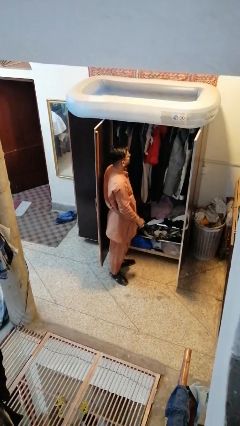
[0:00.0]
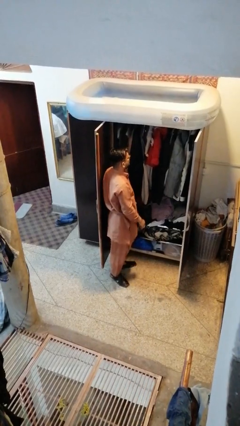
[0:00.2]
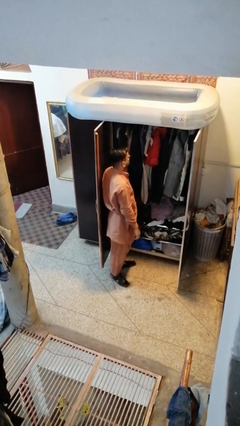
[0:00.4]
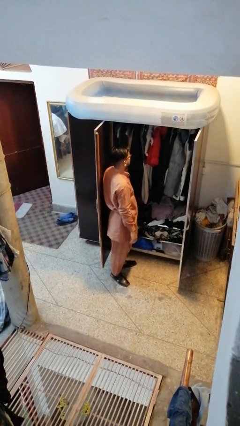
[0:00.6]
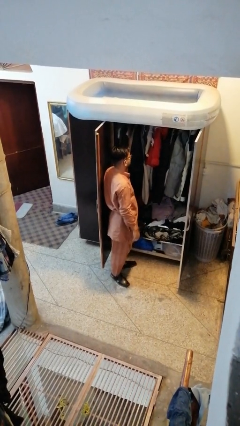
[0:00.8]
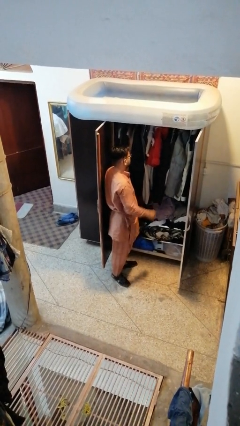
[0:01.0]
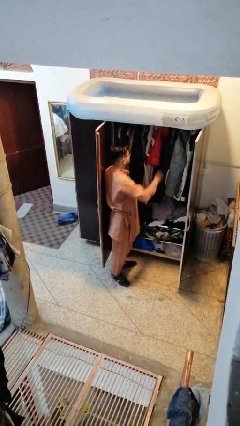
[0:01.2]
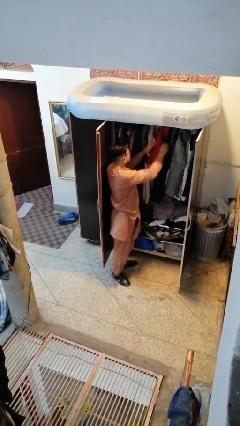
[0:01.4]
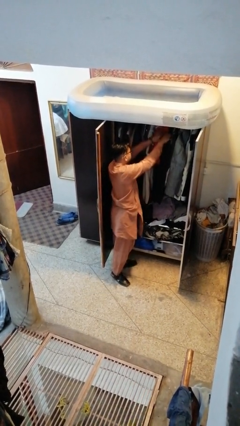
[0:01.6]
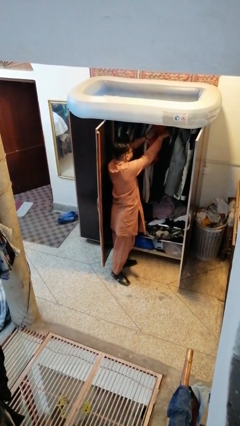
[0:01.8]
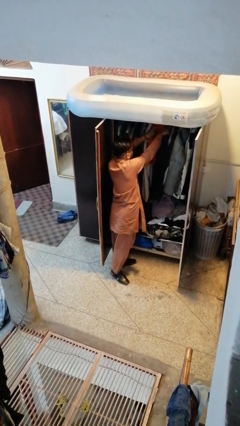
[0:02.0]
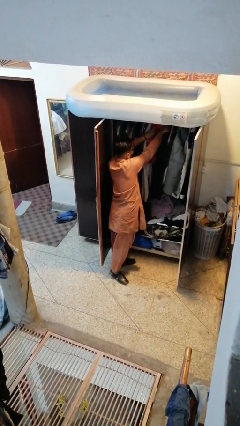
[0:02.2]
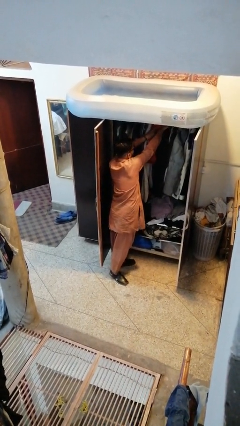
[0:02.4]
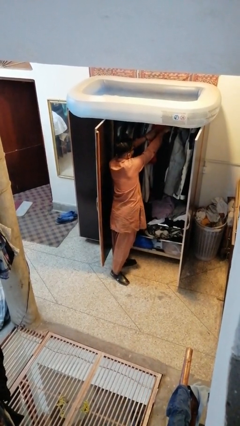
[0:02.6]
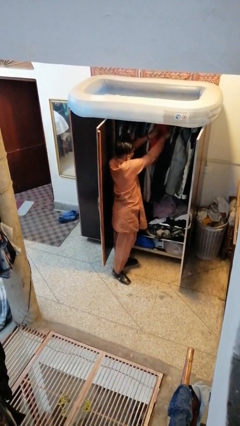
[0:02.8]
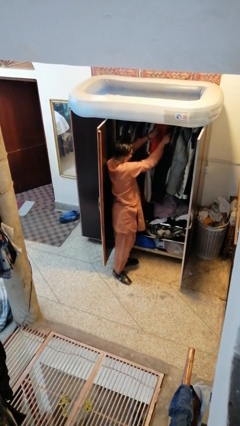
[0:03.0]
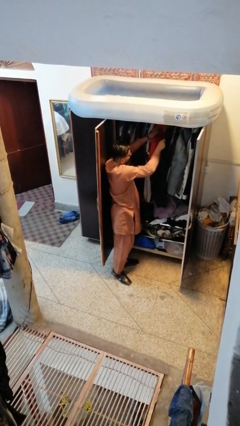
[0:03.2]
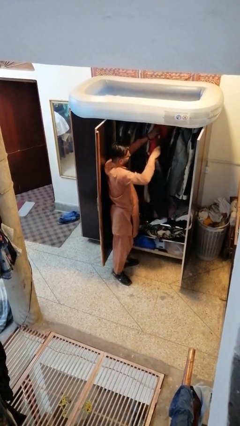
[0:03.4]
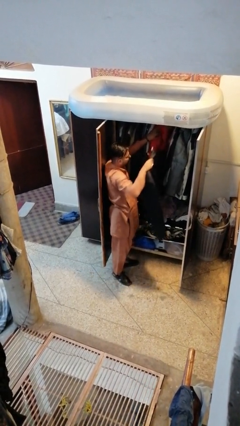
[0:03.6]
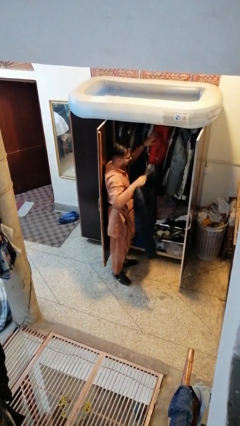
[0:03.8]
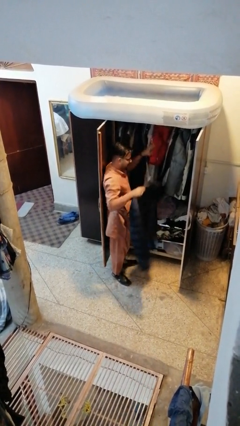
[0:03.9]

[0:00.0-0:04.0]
person takes clothes from closet

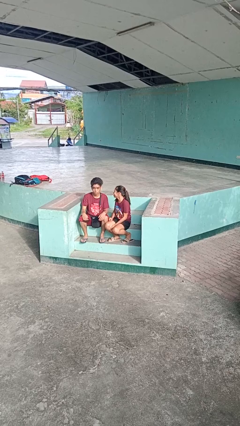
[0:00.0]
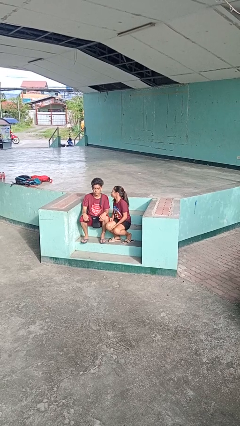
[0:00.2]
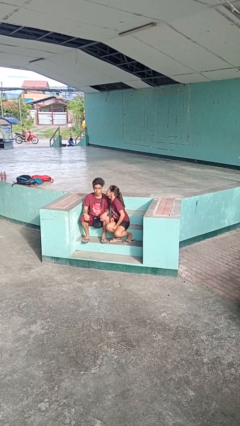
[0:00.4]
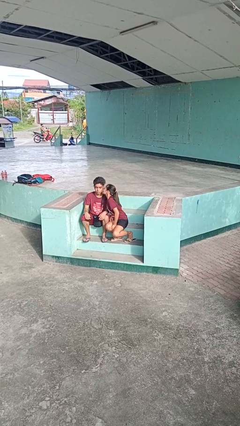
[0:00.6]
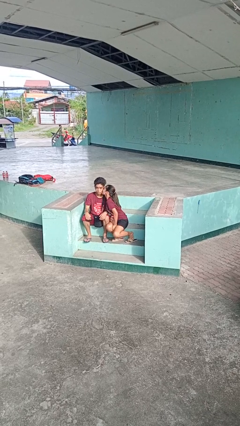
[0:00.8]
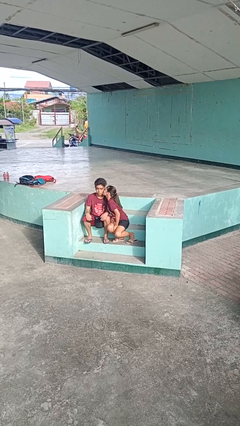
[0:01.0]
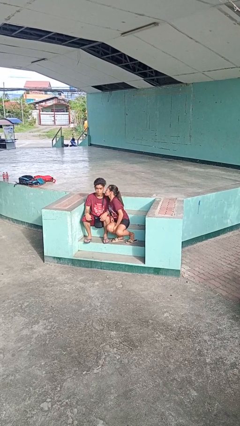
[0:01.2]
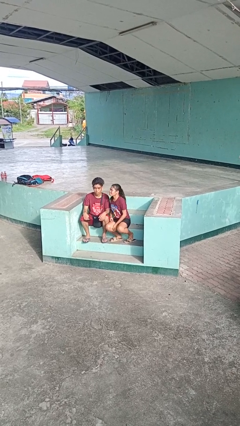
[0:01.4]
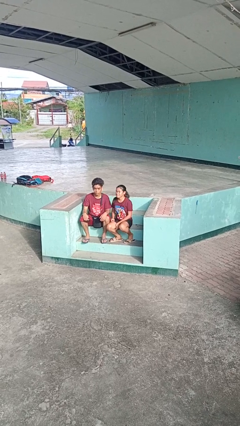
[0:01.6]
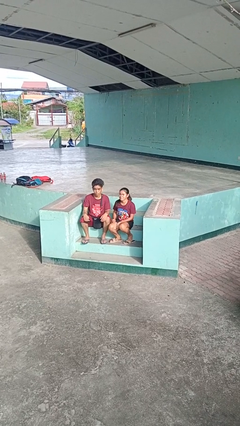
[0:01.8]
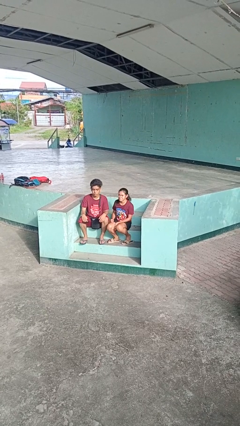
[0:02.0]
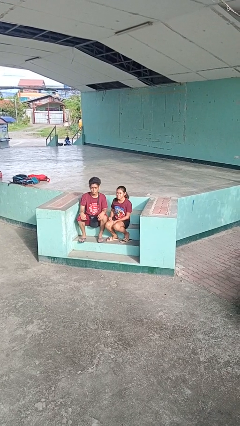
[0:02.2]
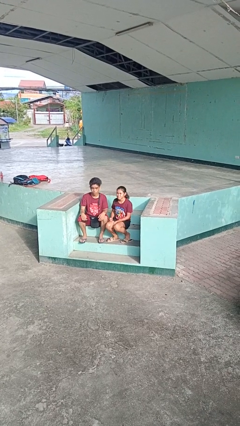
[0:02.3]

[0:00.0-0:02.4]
person kisses cheek of person

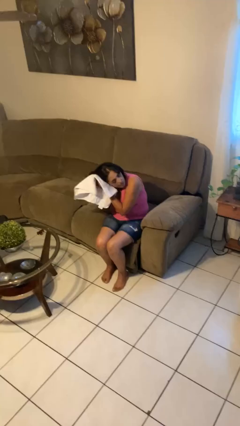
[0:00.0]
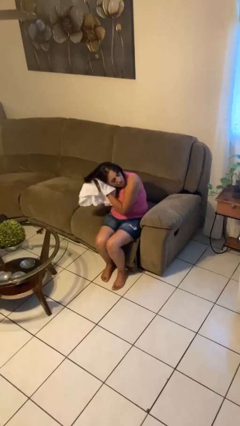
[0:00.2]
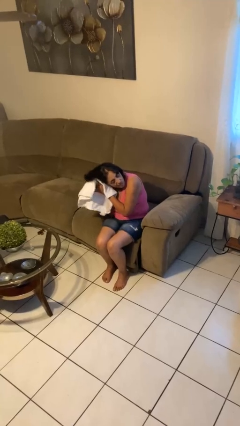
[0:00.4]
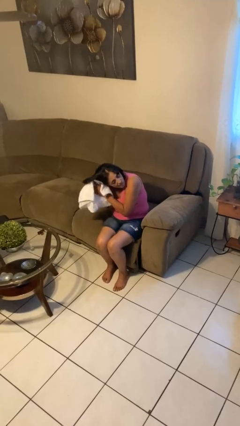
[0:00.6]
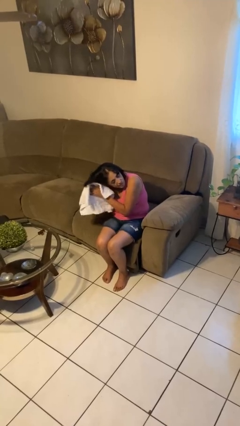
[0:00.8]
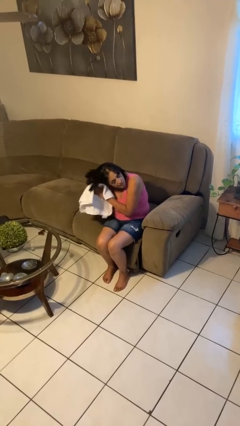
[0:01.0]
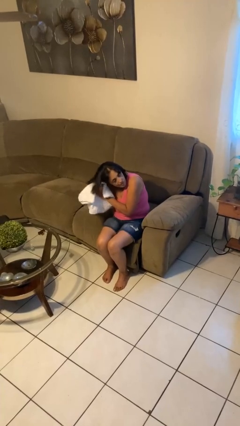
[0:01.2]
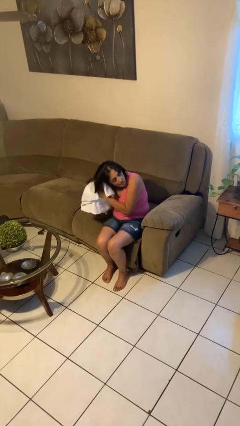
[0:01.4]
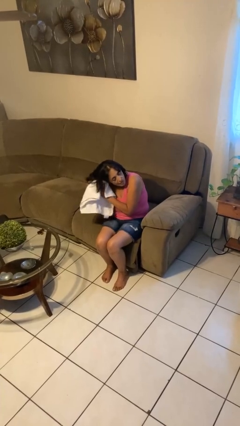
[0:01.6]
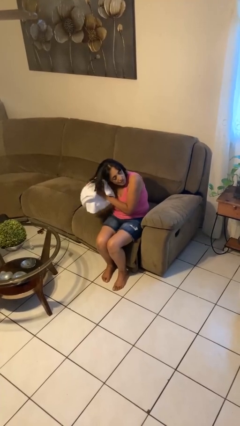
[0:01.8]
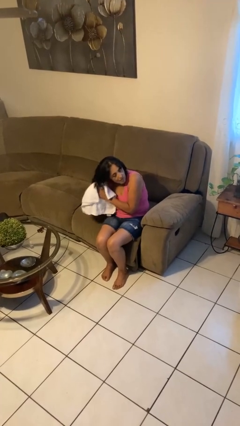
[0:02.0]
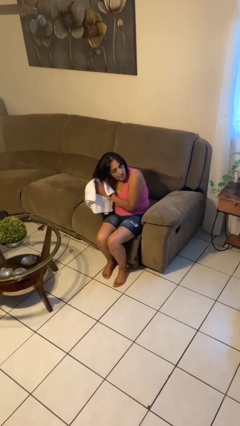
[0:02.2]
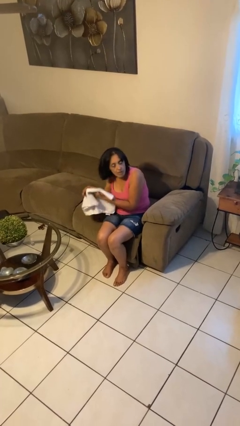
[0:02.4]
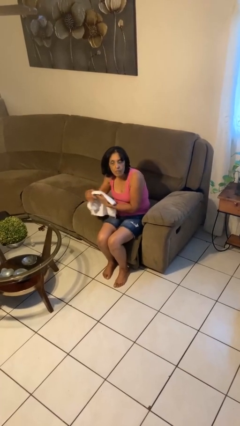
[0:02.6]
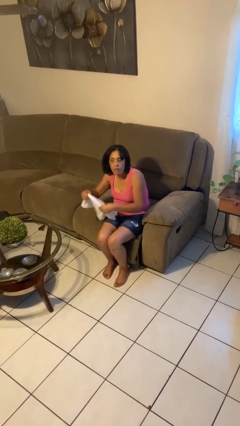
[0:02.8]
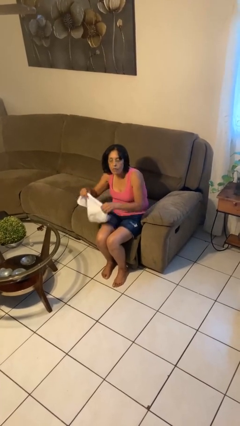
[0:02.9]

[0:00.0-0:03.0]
person dries hair with towel

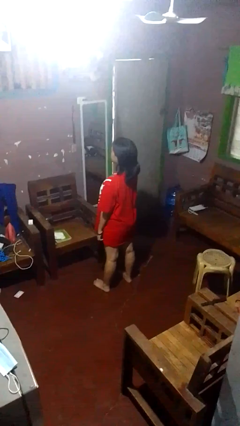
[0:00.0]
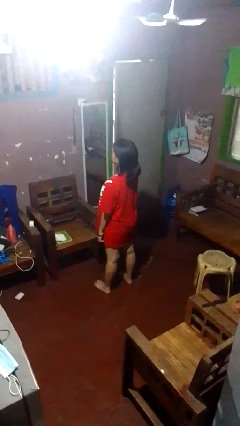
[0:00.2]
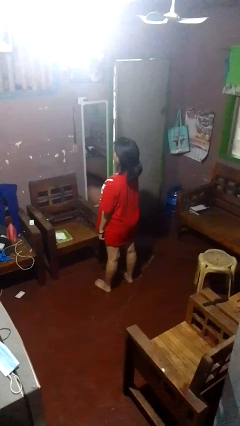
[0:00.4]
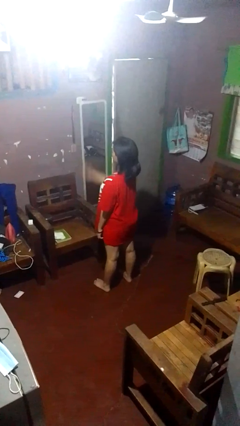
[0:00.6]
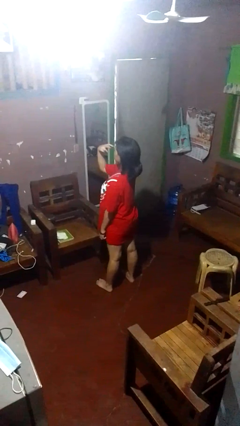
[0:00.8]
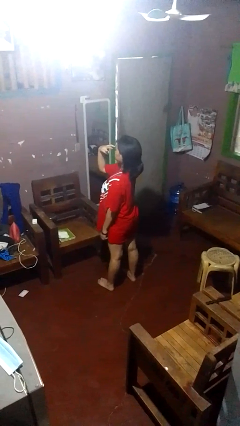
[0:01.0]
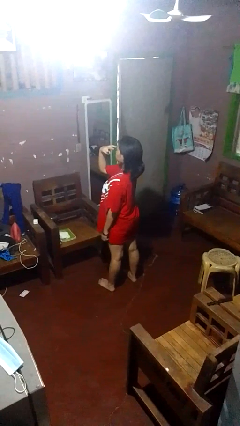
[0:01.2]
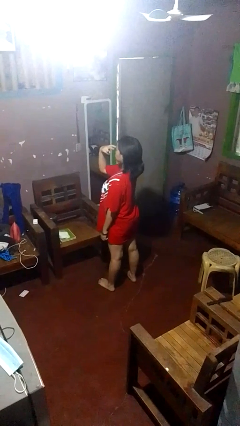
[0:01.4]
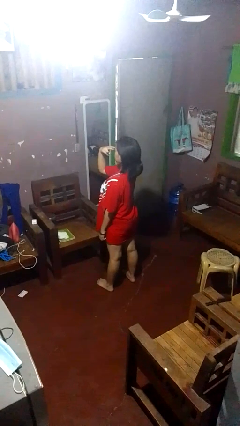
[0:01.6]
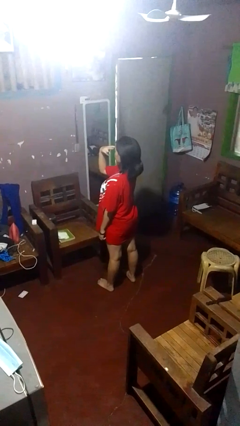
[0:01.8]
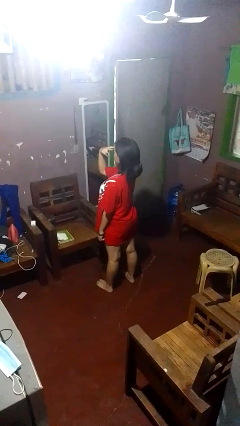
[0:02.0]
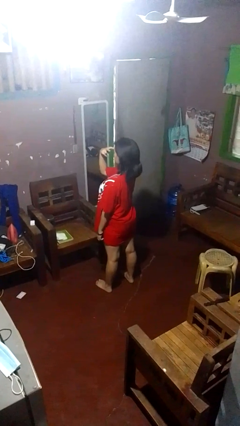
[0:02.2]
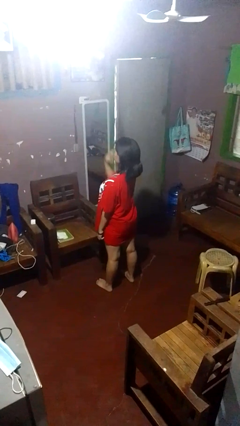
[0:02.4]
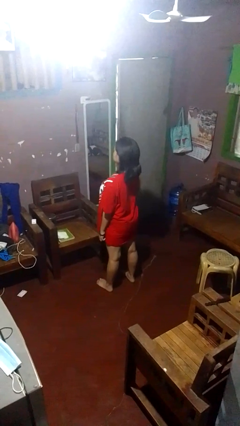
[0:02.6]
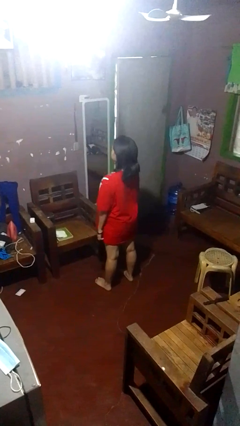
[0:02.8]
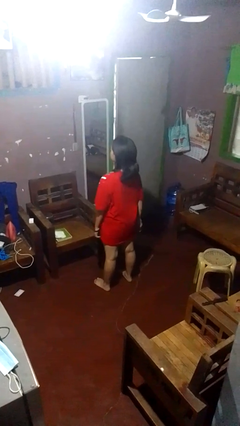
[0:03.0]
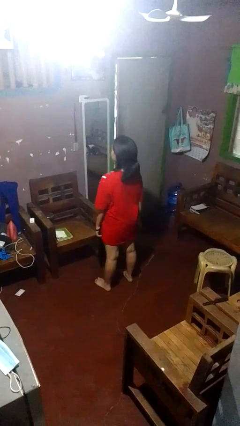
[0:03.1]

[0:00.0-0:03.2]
person gestures watch closely

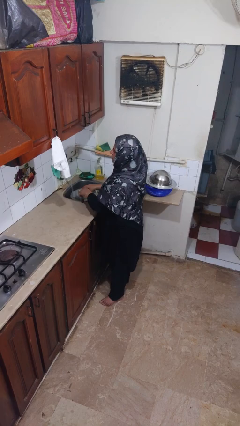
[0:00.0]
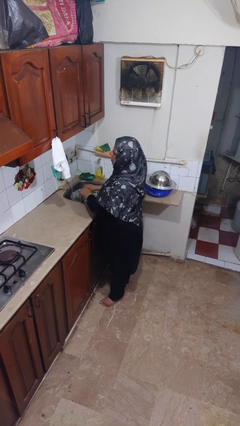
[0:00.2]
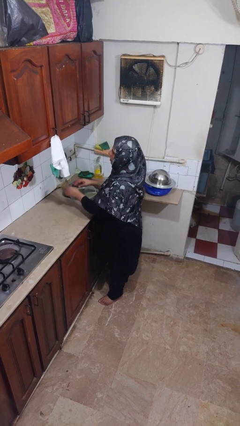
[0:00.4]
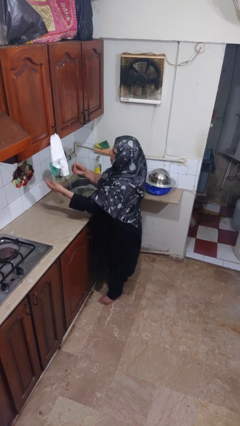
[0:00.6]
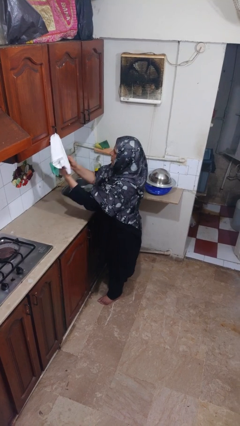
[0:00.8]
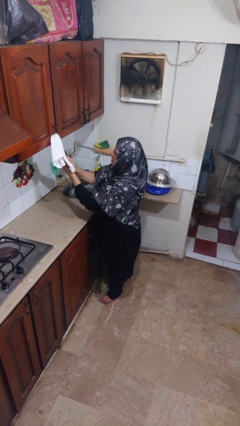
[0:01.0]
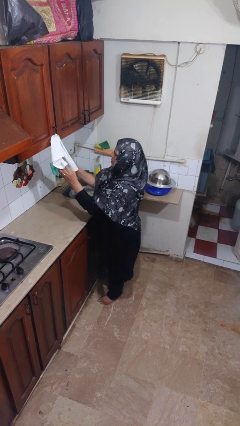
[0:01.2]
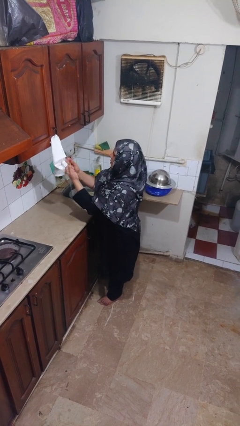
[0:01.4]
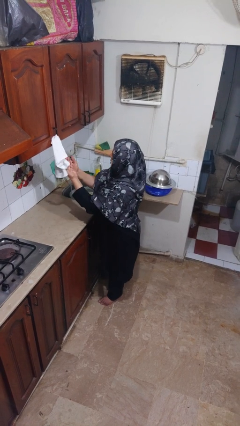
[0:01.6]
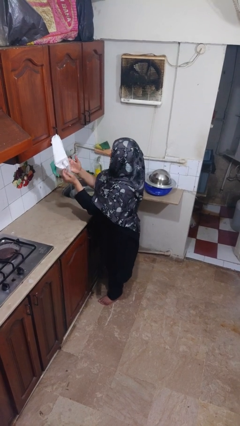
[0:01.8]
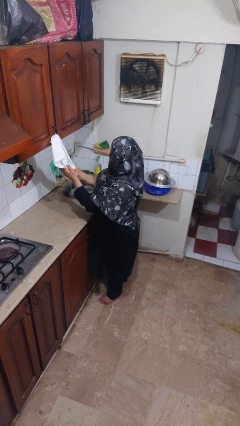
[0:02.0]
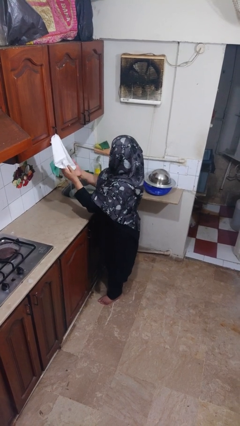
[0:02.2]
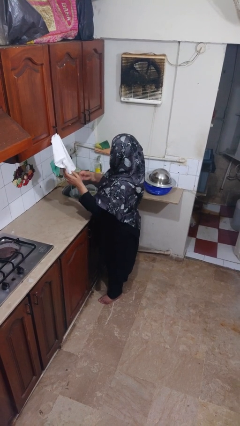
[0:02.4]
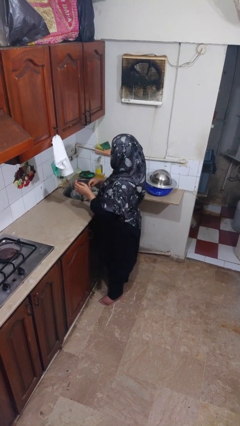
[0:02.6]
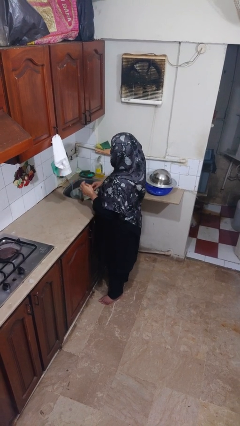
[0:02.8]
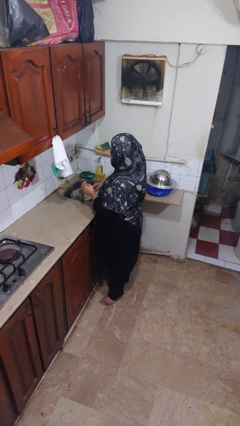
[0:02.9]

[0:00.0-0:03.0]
person dries hands with towel

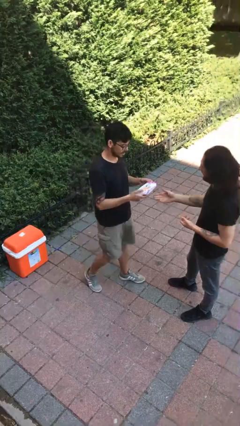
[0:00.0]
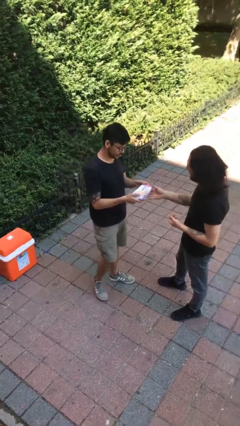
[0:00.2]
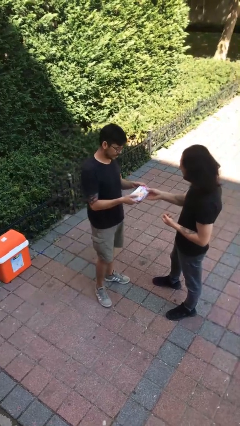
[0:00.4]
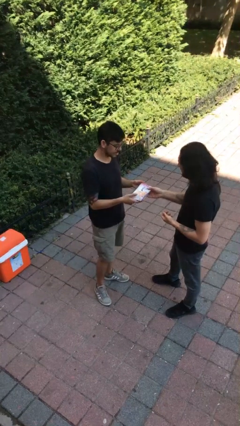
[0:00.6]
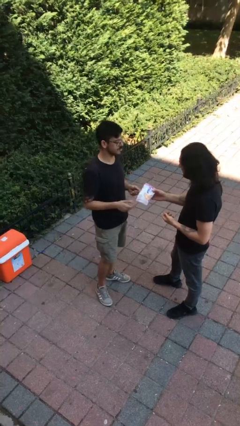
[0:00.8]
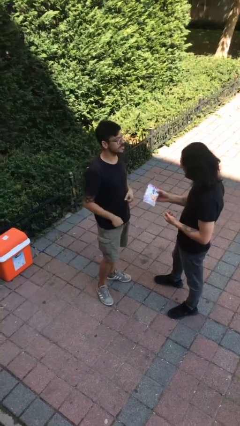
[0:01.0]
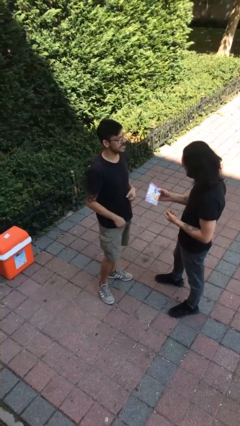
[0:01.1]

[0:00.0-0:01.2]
person transfers object to person

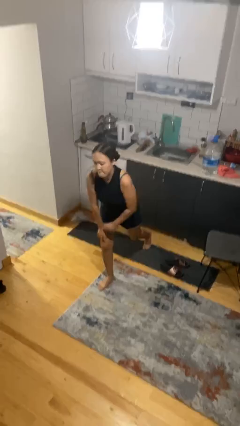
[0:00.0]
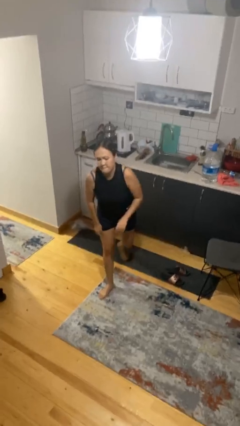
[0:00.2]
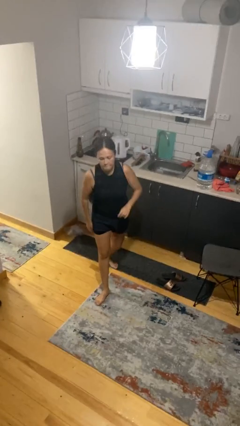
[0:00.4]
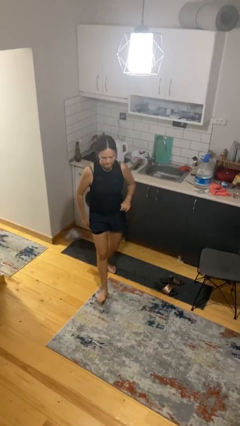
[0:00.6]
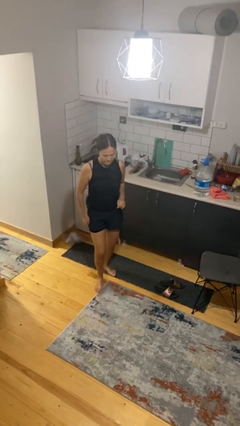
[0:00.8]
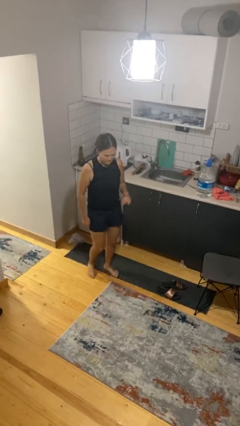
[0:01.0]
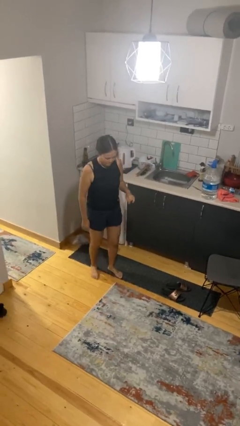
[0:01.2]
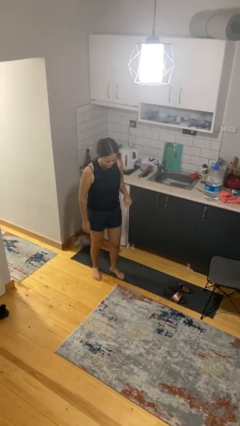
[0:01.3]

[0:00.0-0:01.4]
person stands up from floor
